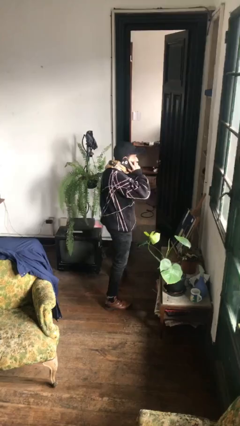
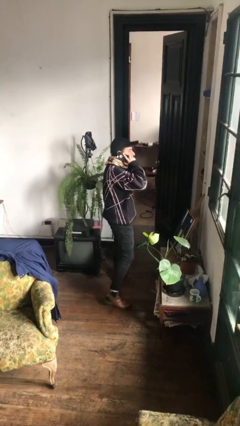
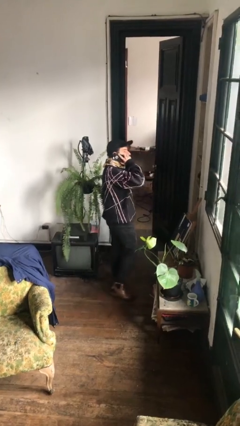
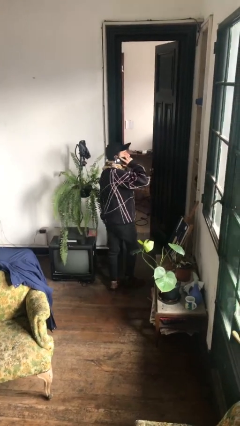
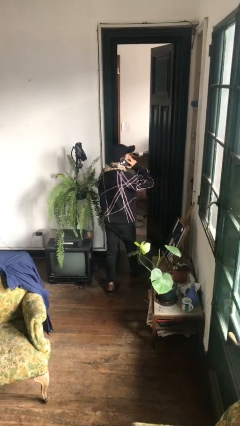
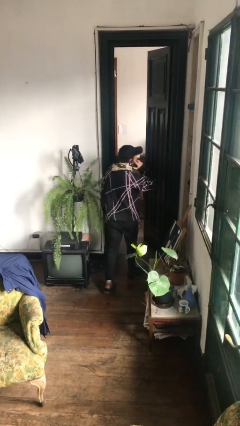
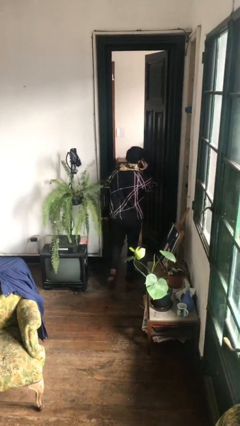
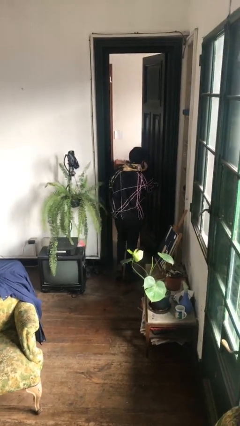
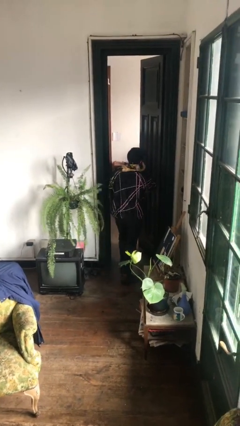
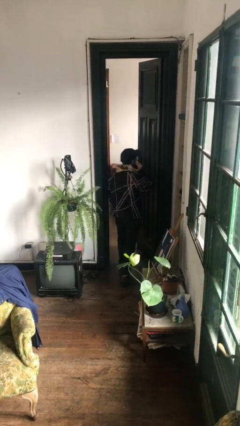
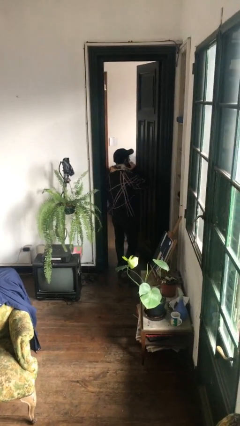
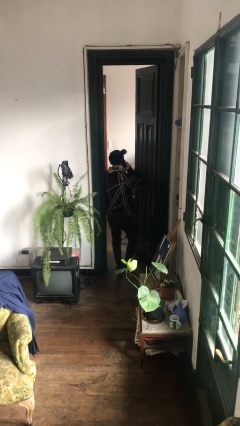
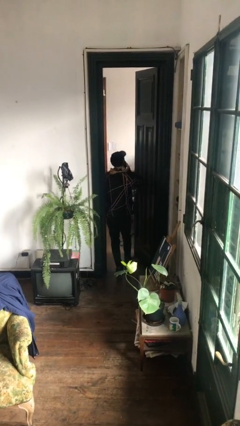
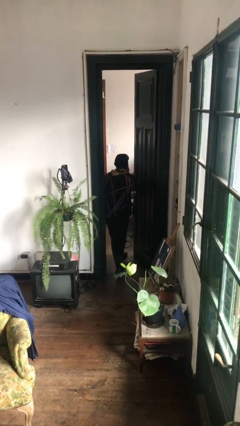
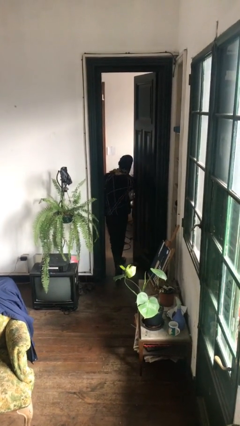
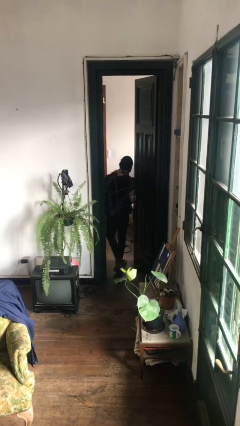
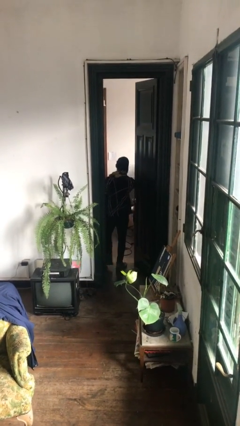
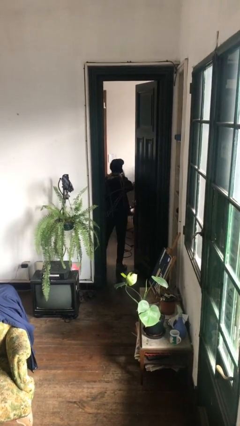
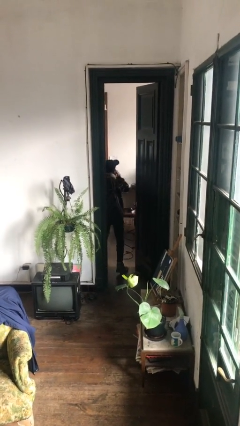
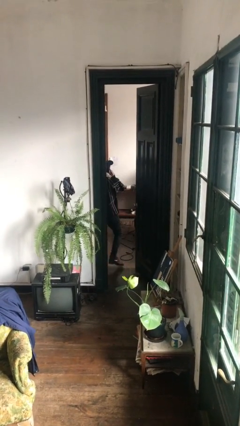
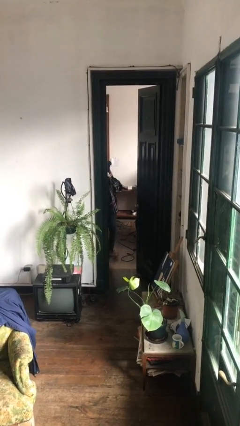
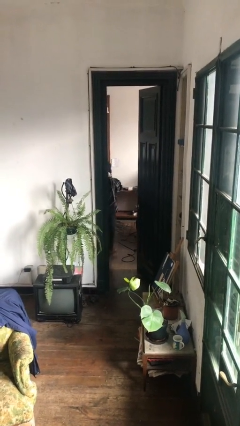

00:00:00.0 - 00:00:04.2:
person exits scene through structure

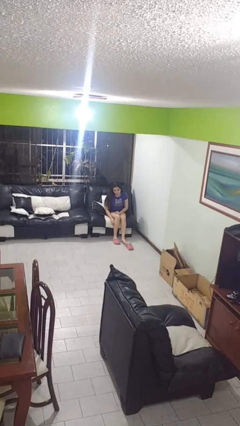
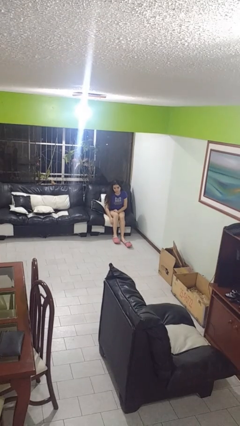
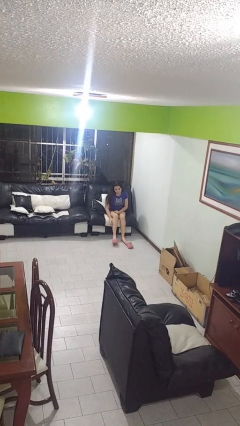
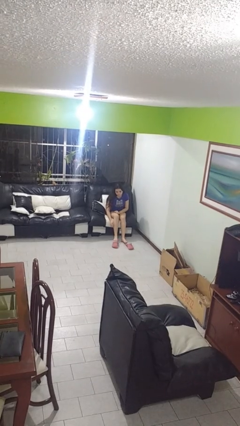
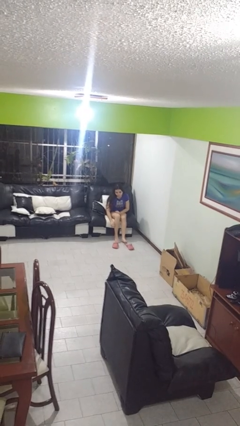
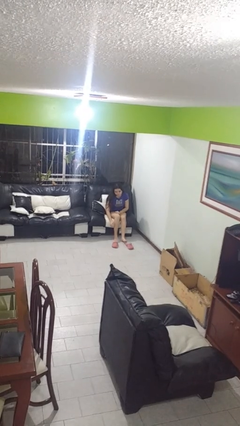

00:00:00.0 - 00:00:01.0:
person takes off shoes

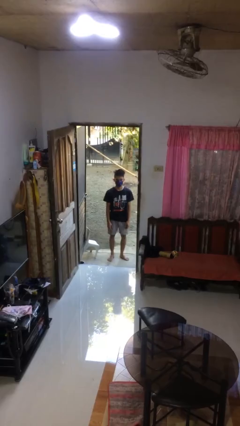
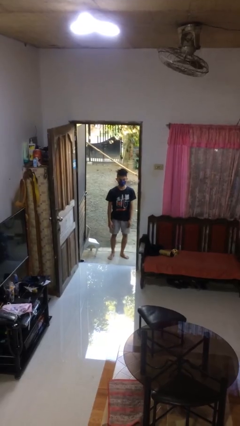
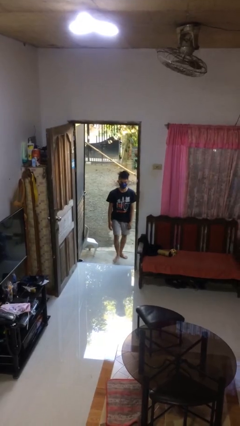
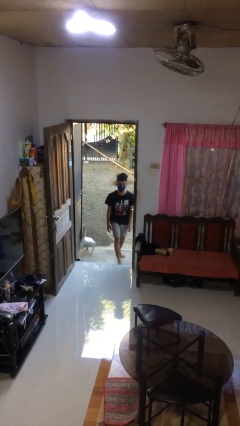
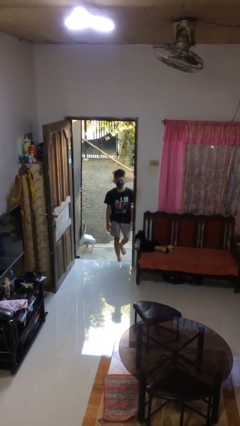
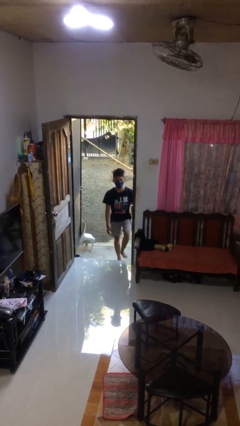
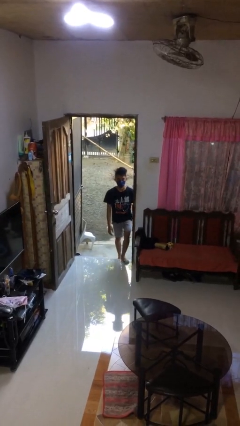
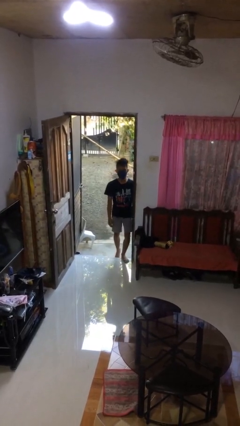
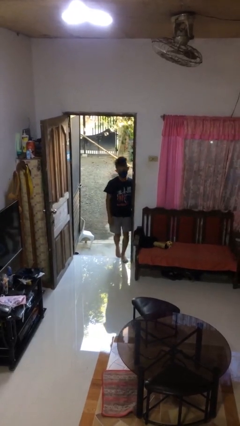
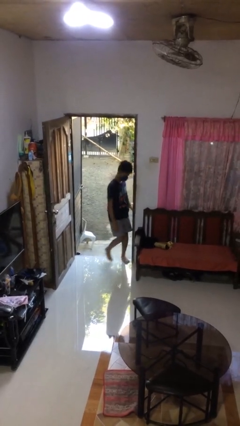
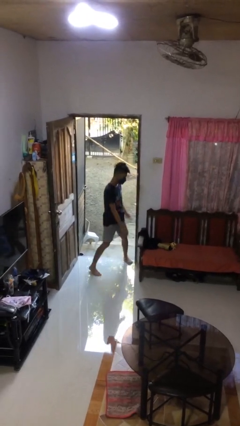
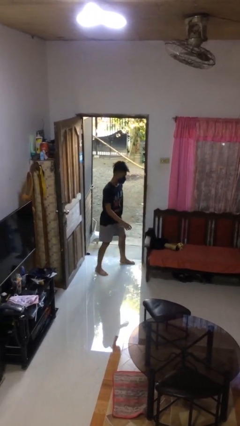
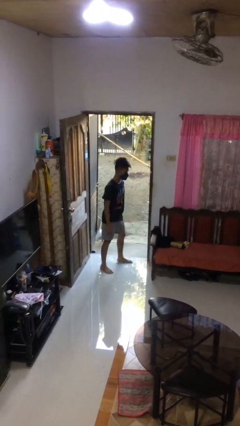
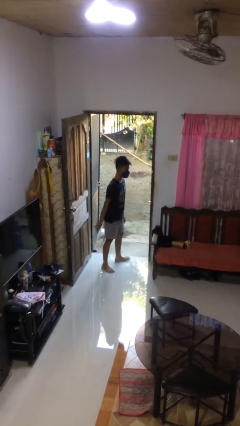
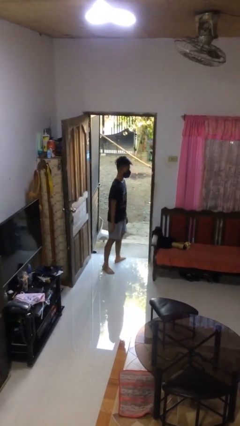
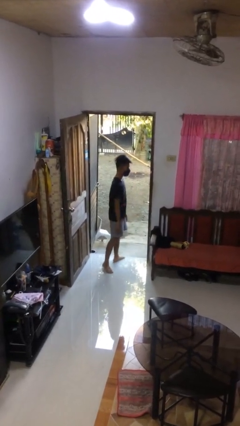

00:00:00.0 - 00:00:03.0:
person bumps into wall

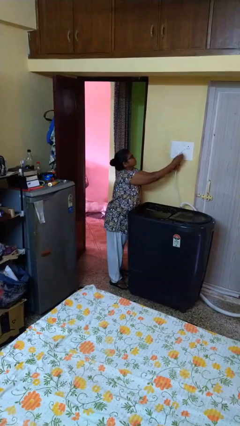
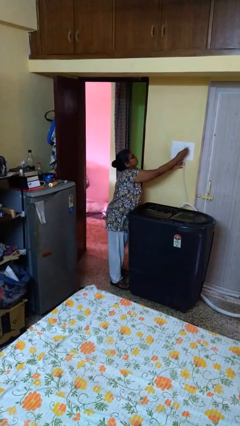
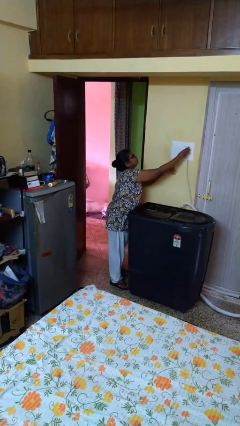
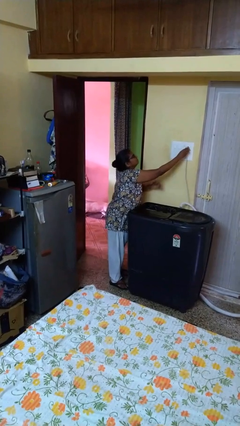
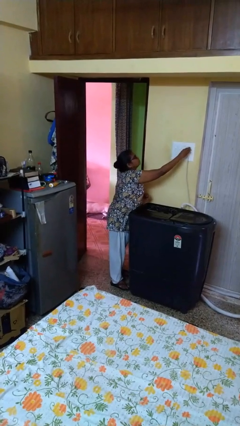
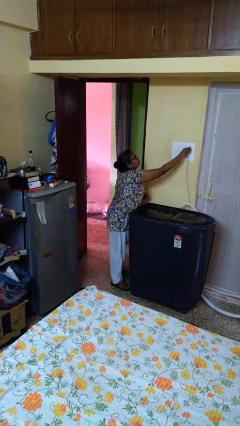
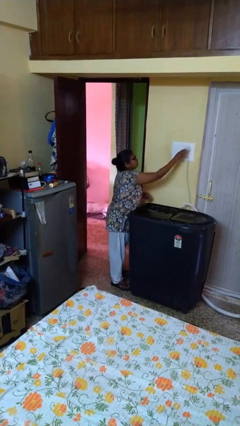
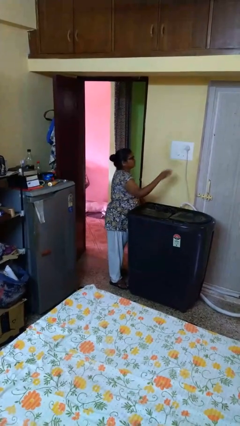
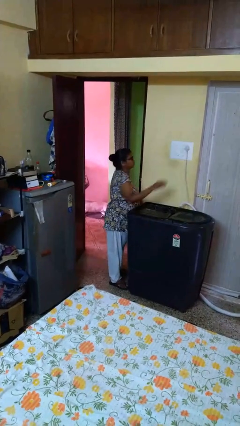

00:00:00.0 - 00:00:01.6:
person plugs into electrical socket

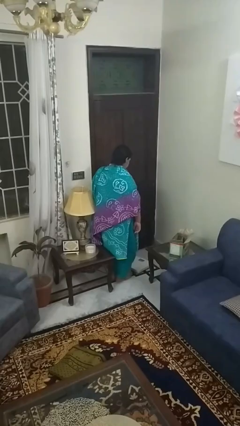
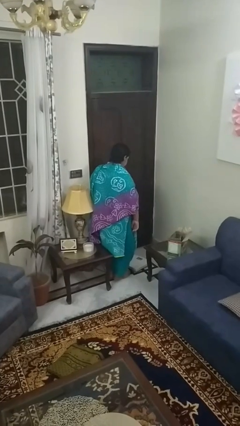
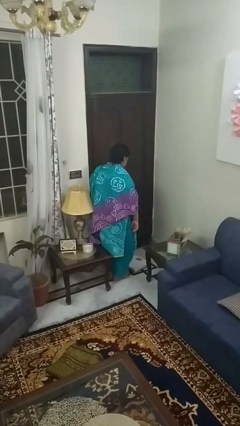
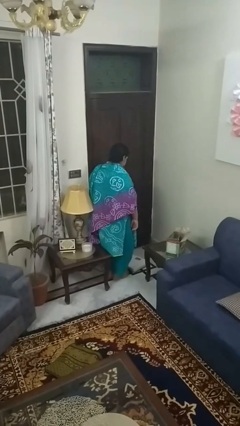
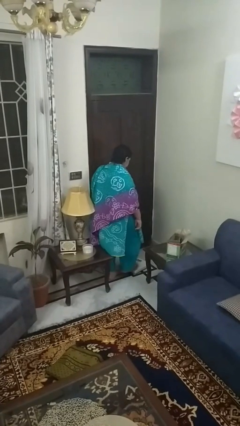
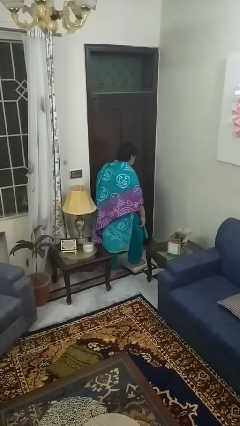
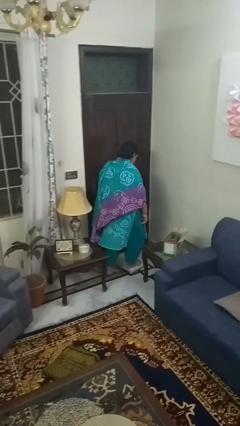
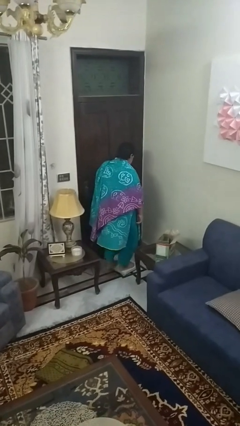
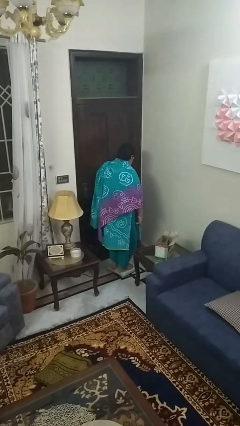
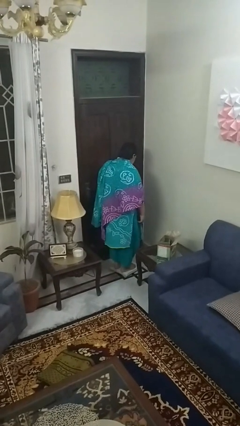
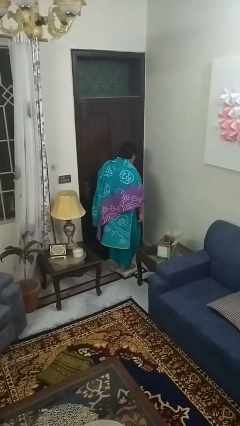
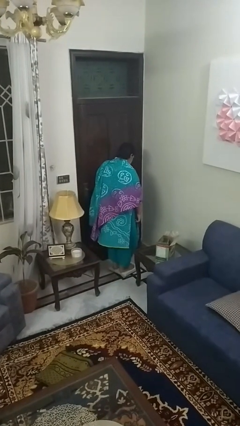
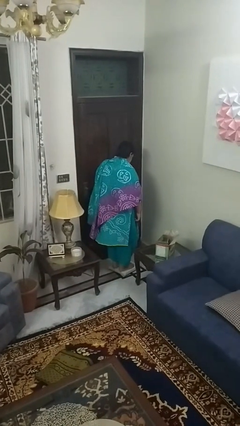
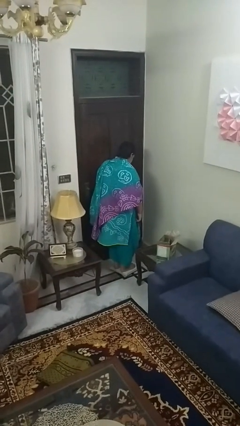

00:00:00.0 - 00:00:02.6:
person uses bodyweight scale

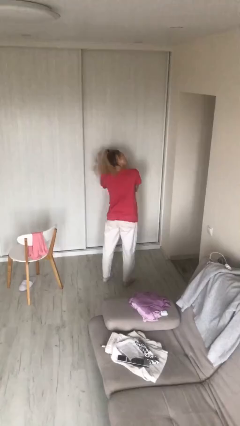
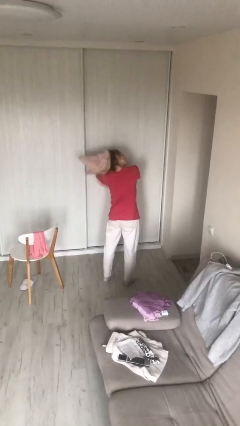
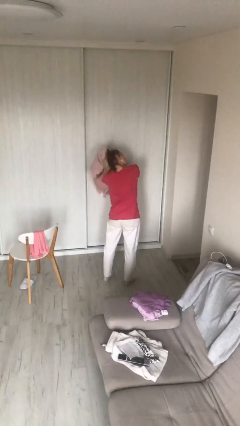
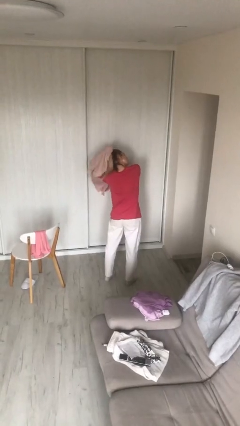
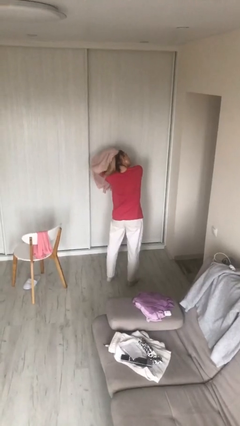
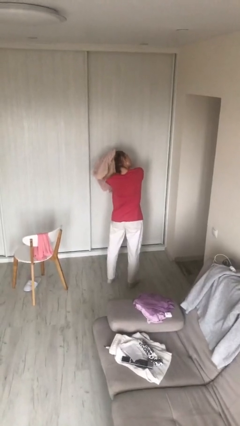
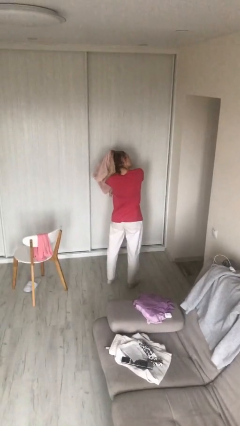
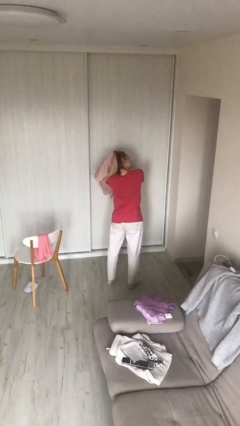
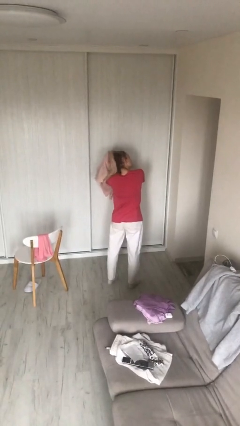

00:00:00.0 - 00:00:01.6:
person dries hair with towel

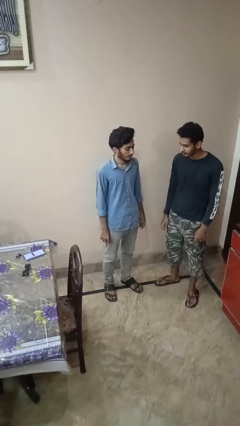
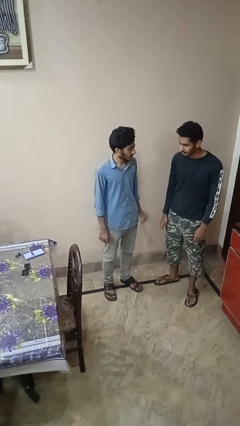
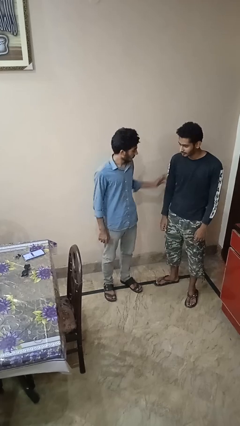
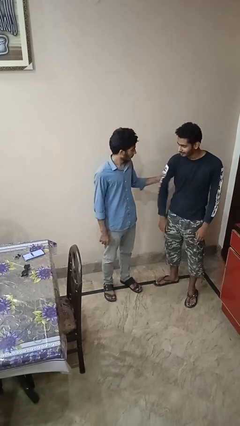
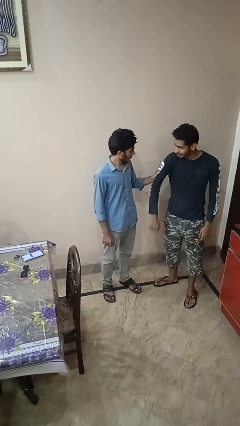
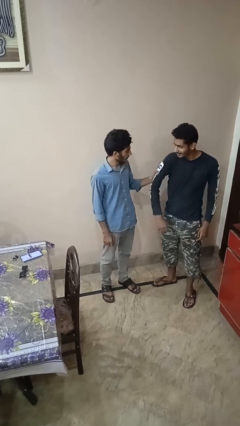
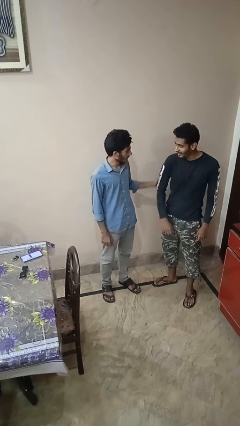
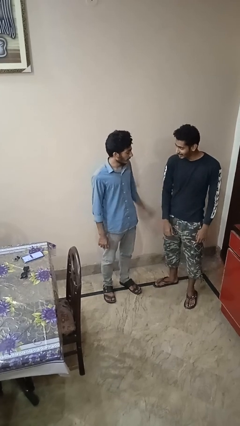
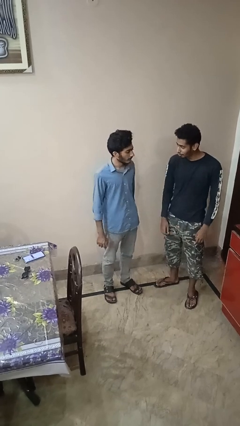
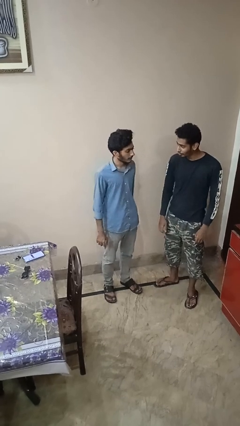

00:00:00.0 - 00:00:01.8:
person grabs person by bicep

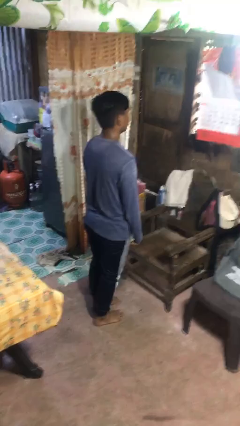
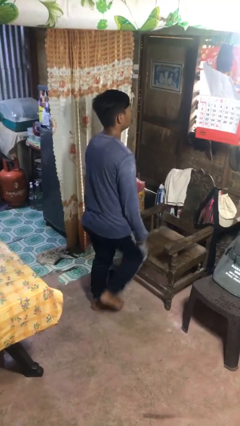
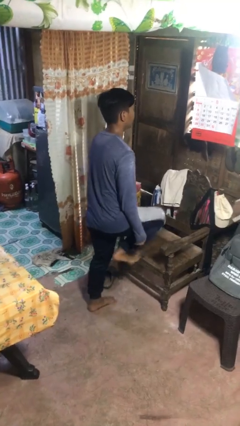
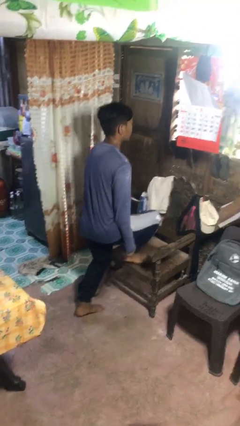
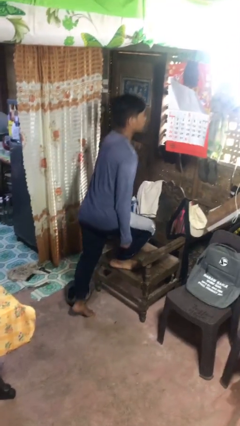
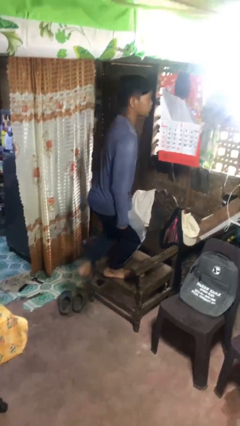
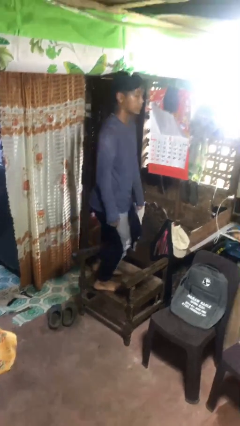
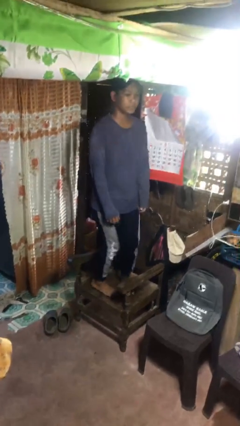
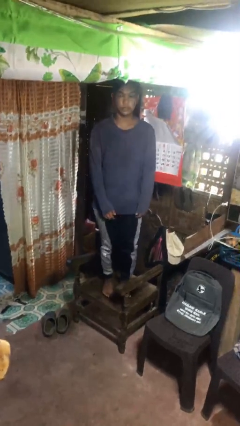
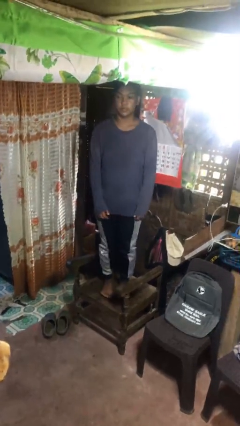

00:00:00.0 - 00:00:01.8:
person climbs on chair
